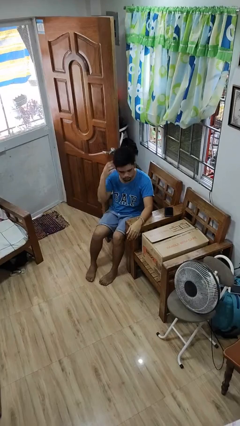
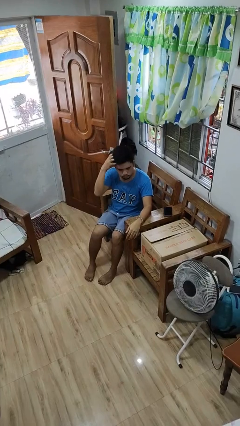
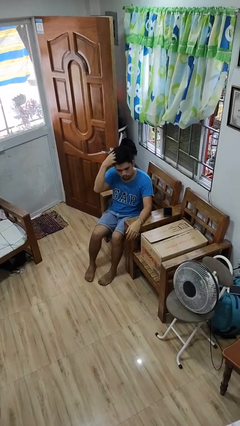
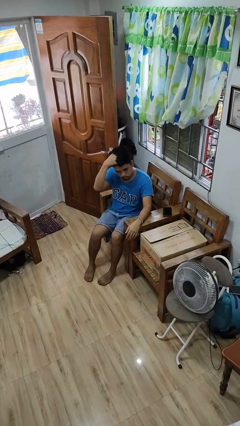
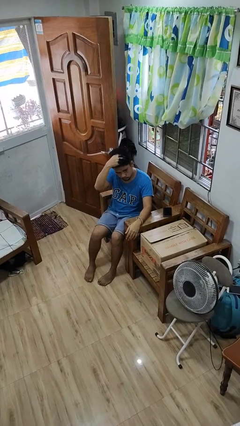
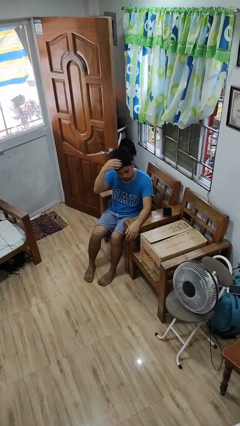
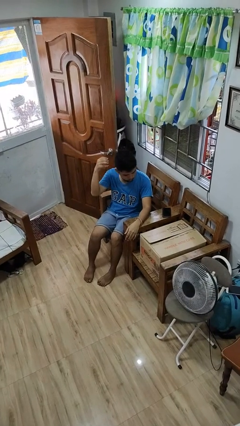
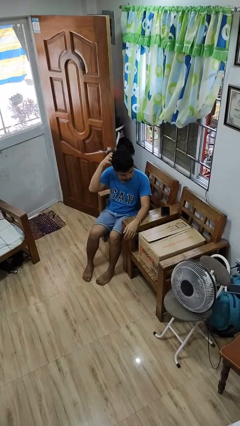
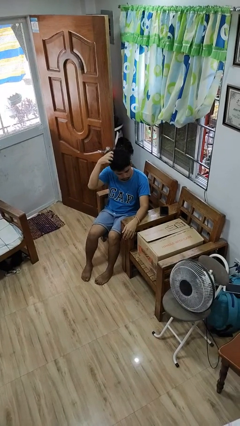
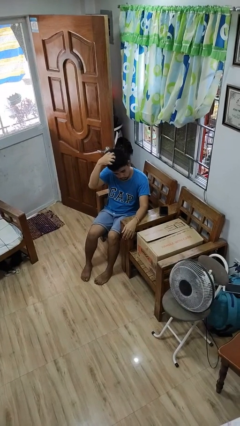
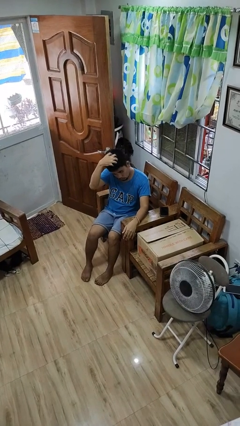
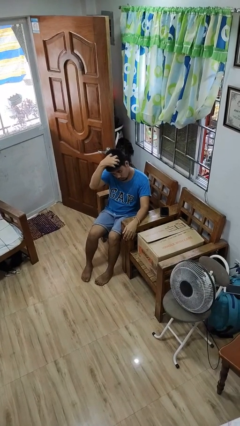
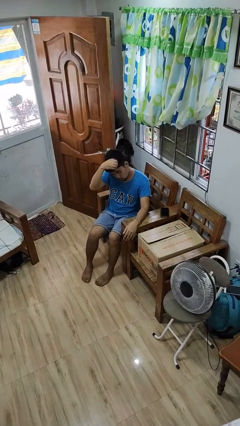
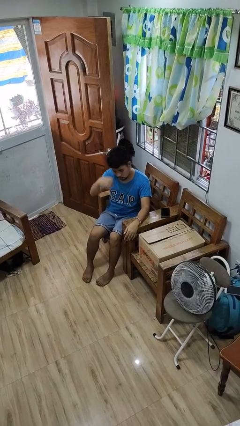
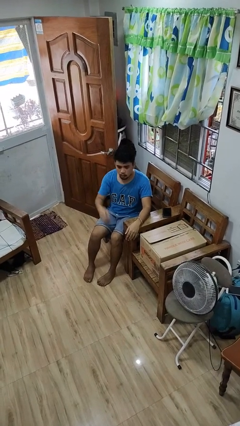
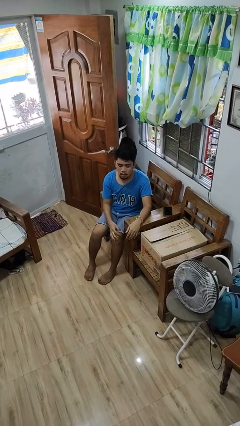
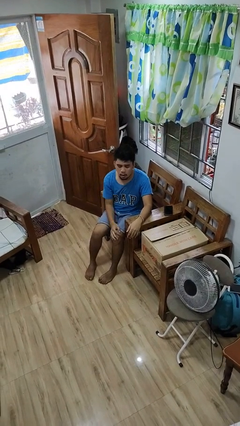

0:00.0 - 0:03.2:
person strokes hair

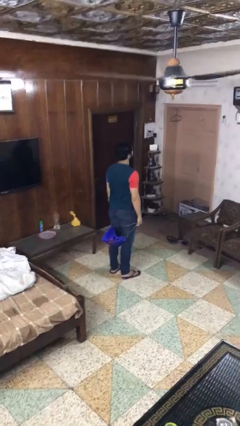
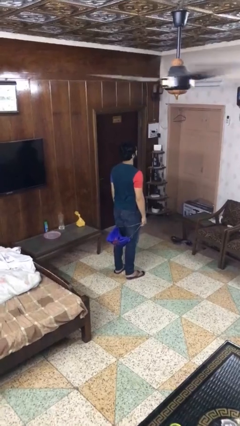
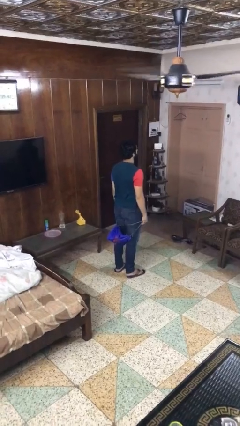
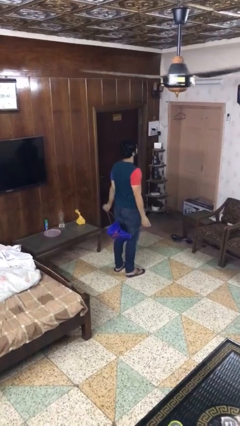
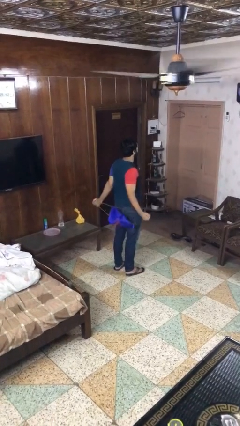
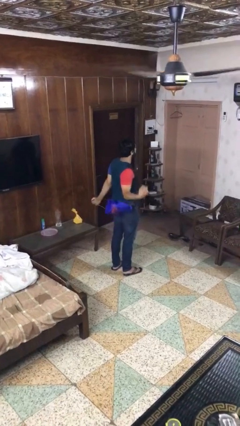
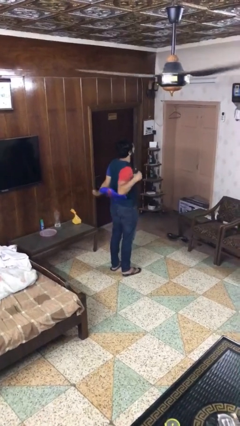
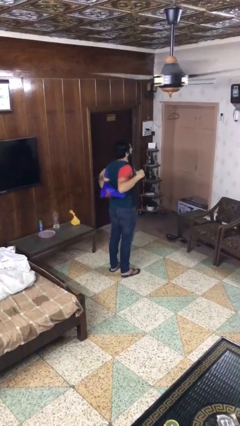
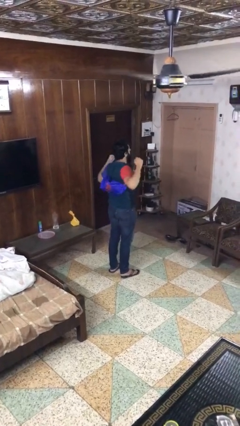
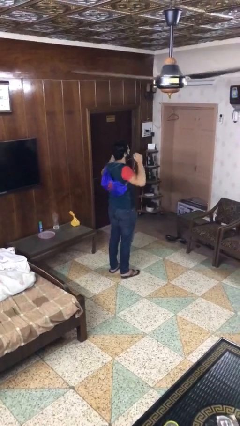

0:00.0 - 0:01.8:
person puts on backpack

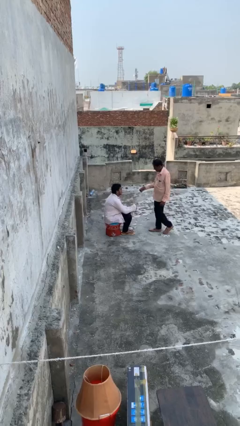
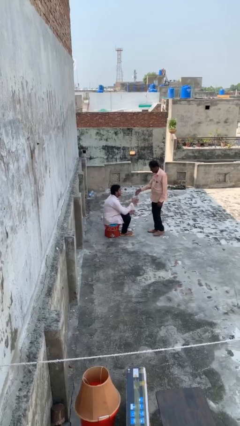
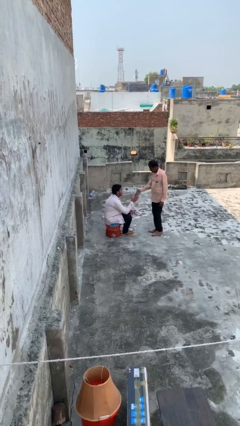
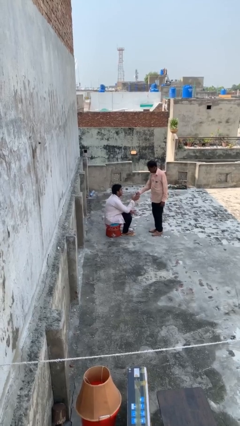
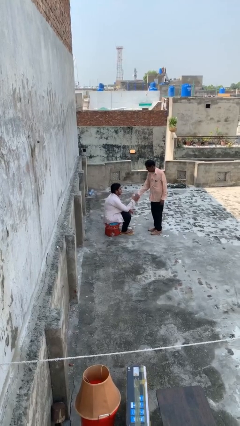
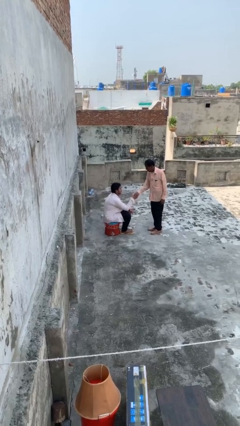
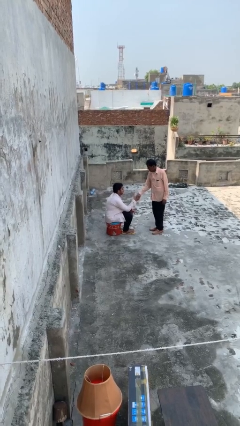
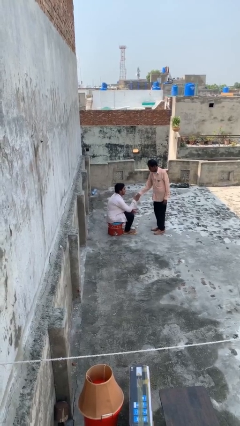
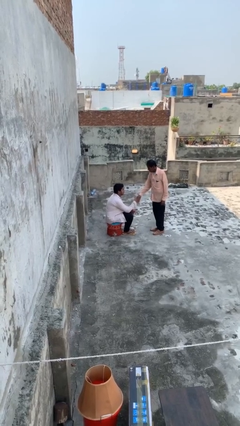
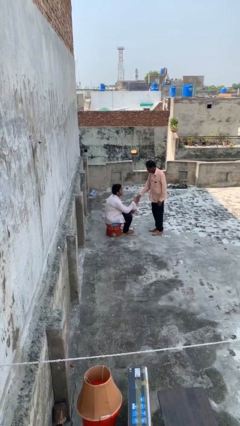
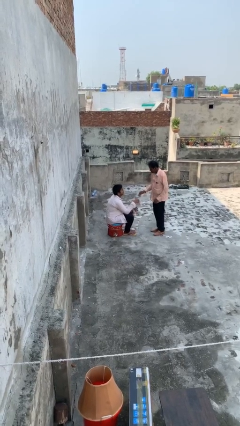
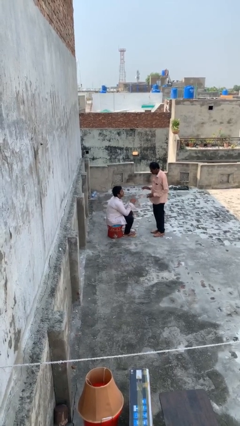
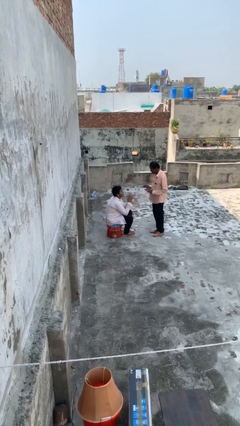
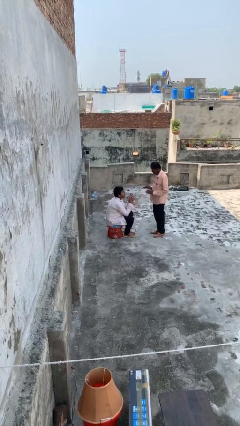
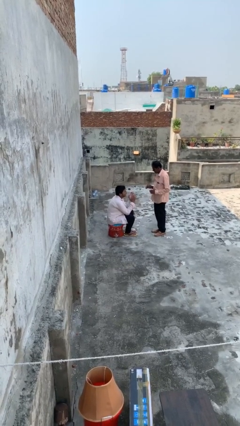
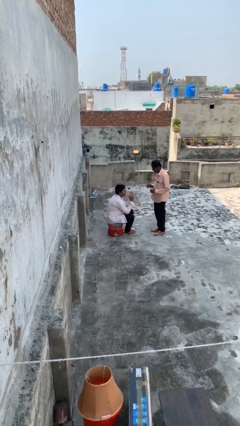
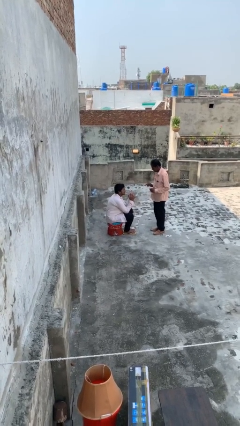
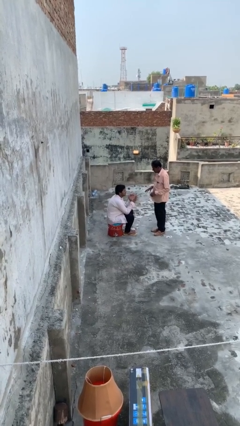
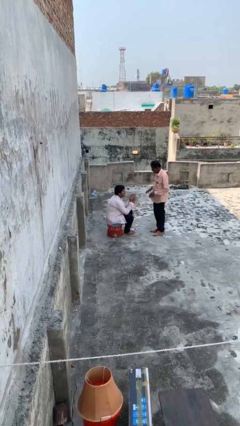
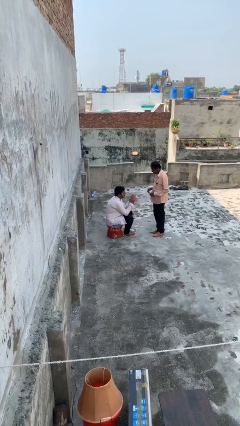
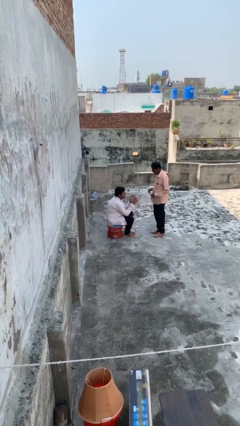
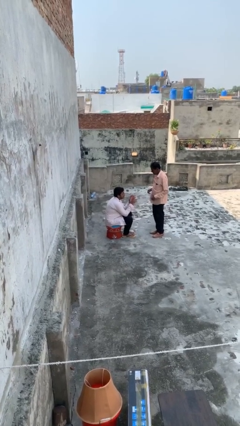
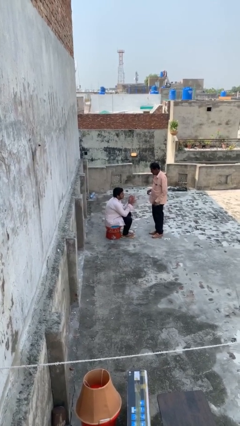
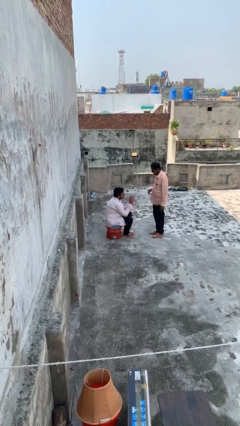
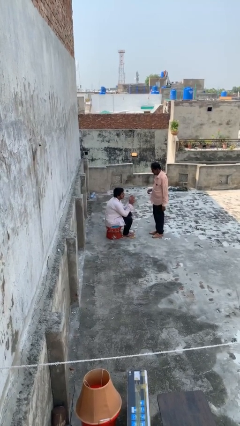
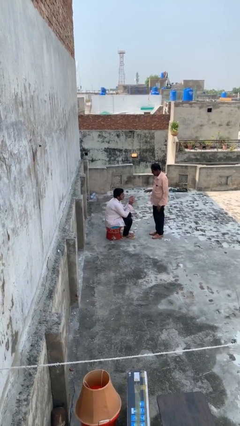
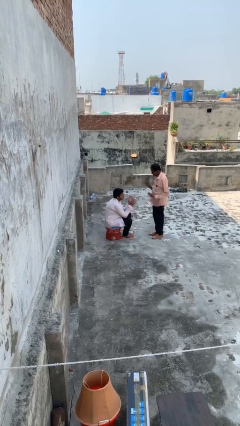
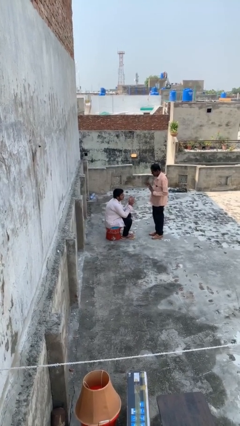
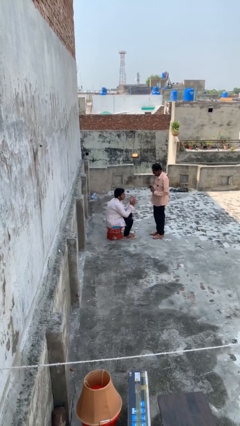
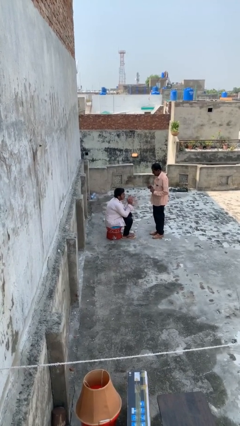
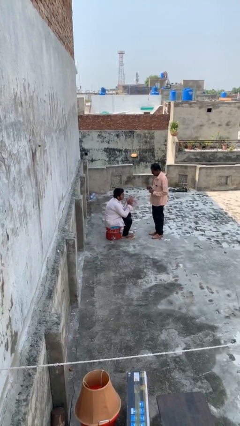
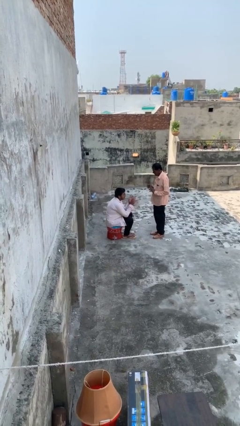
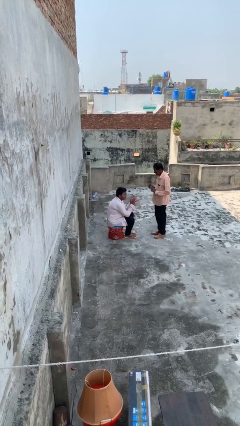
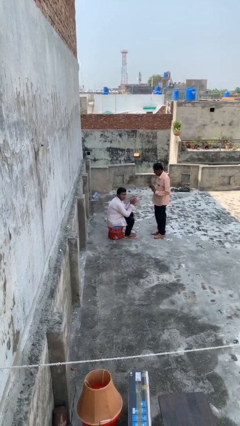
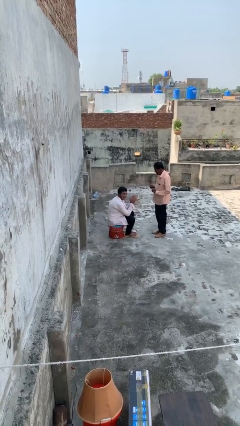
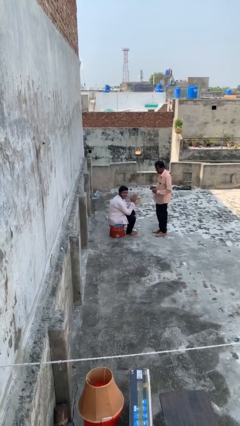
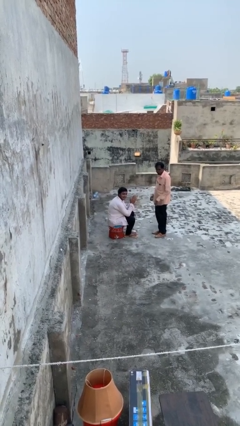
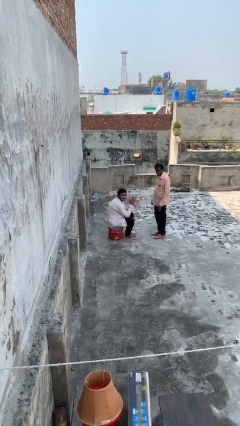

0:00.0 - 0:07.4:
person shakes hand

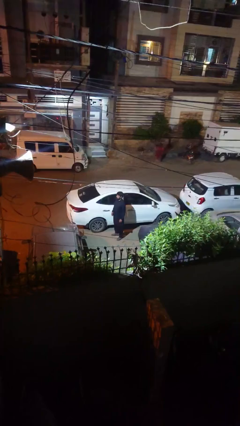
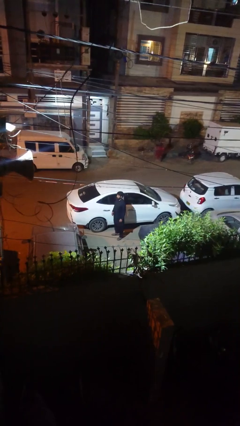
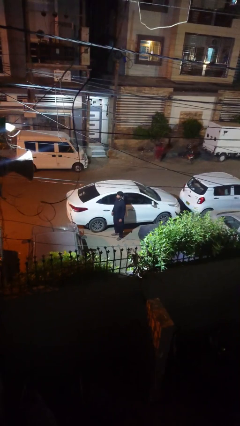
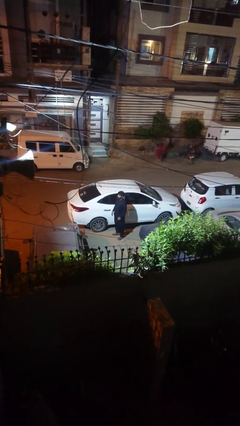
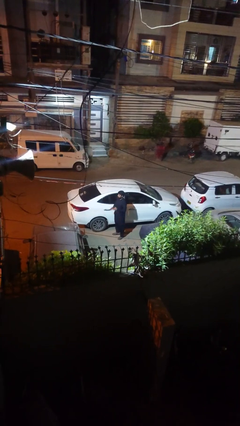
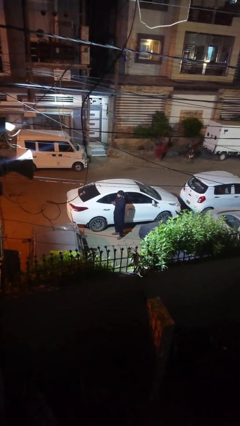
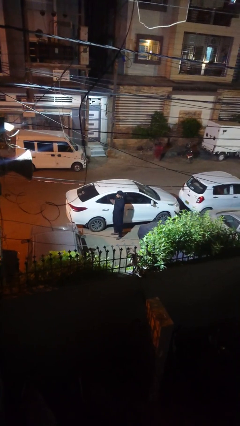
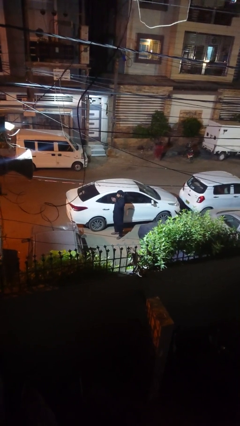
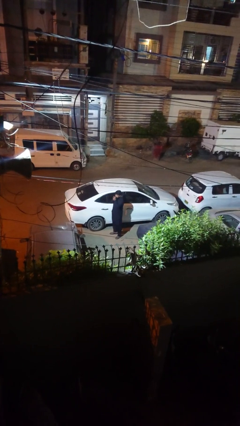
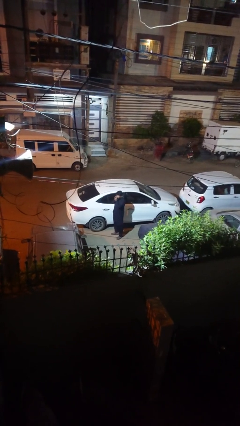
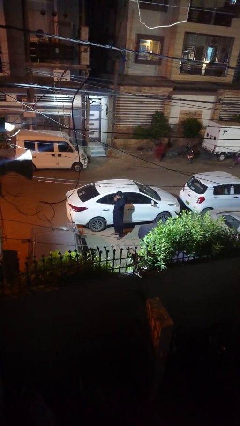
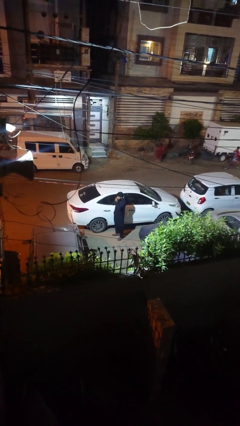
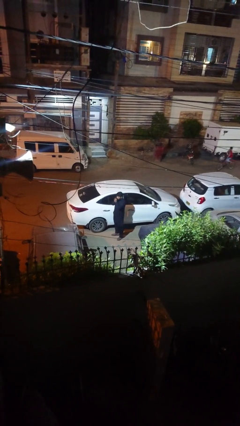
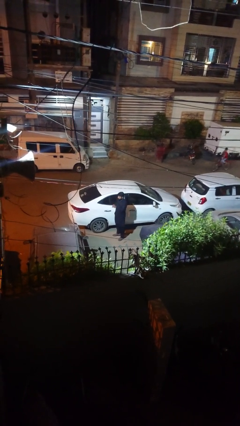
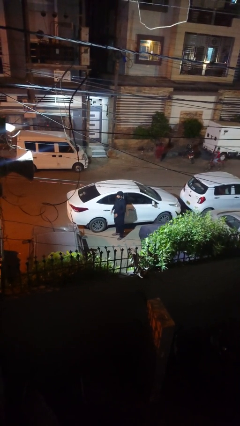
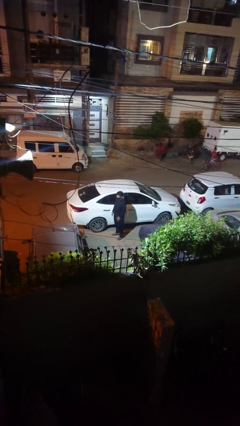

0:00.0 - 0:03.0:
person blows into hands

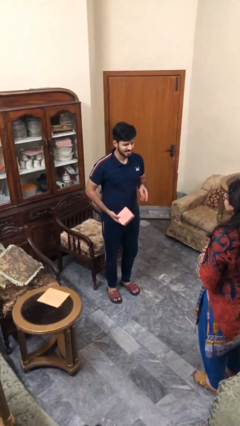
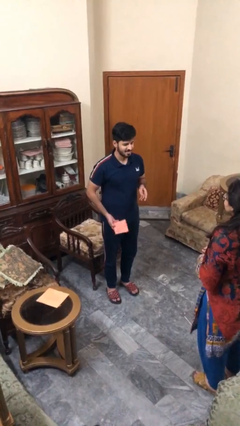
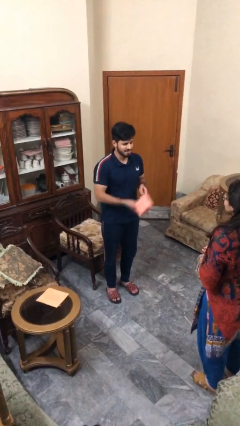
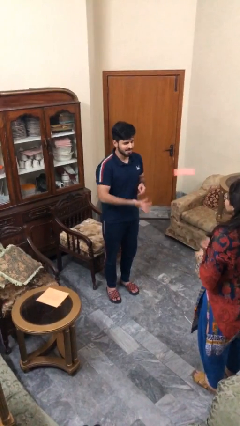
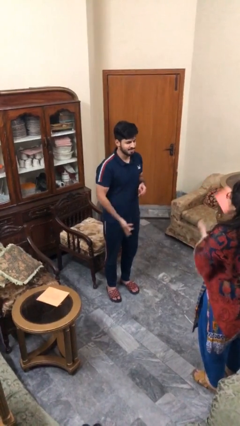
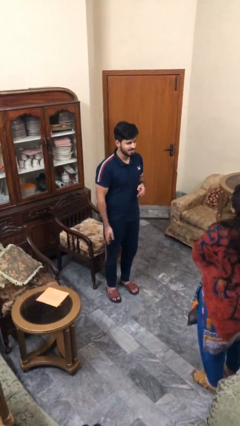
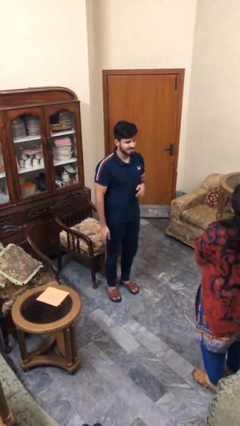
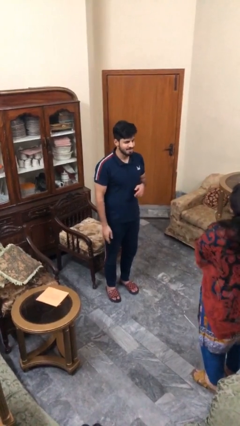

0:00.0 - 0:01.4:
person throws object to person

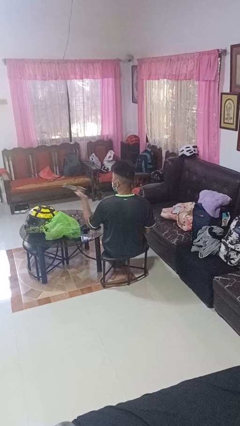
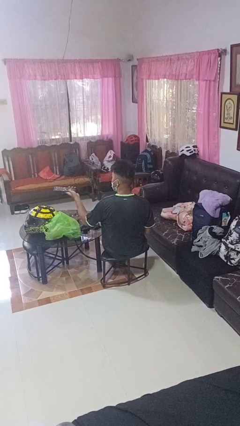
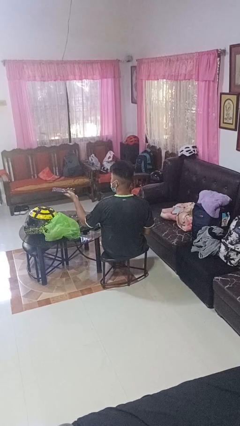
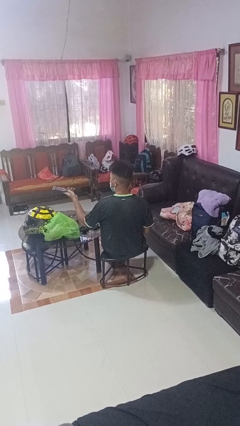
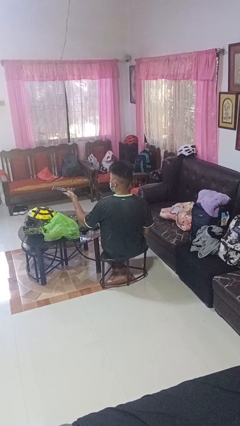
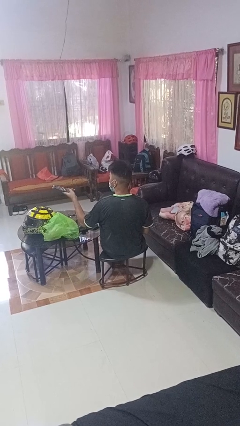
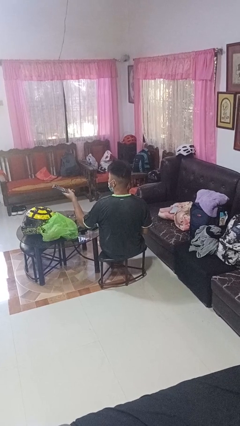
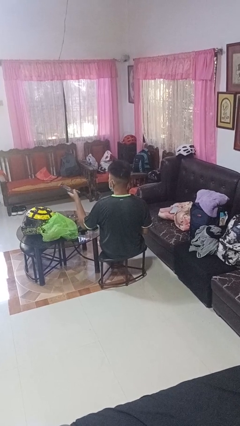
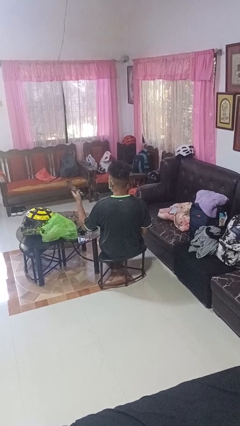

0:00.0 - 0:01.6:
person uses television remote
